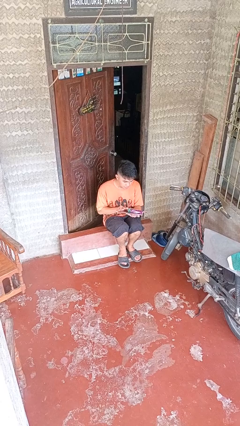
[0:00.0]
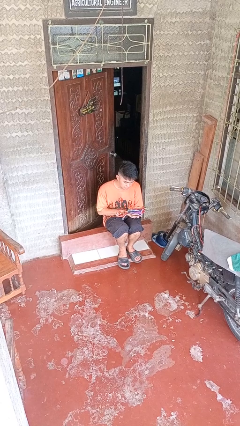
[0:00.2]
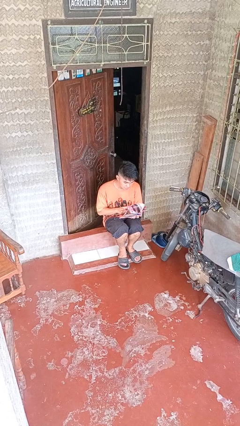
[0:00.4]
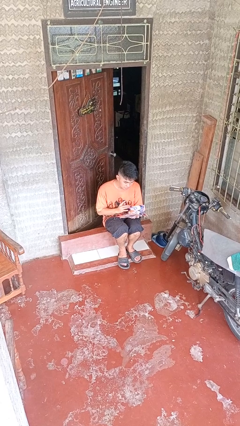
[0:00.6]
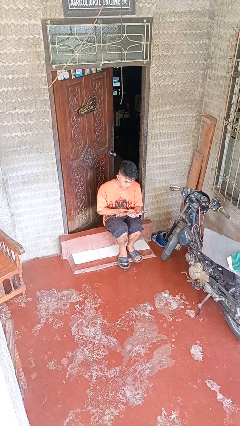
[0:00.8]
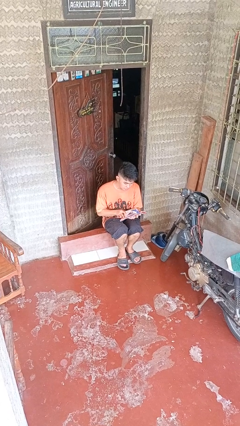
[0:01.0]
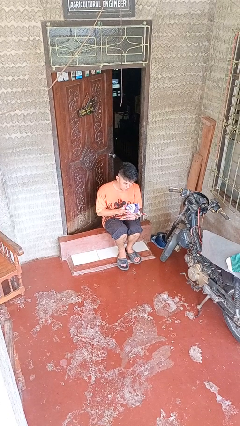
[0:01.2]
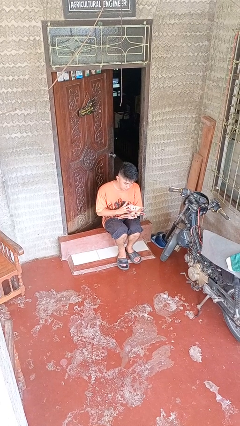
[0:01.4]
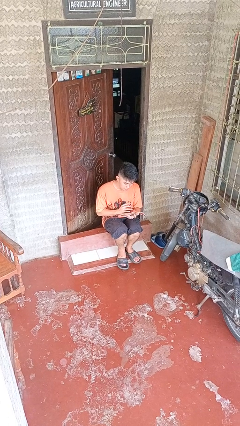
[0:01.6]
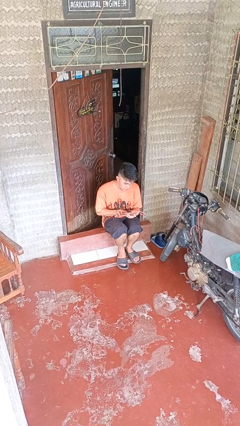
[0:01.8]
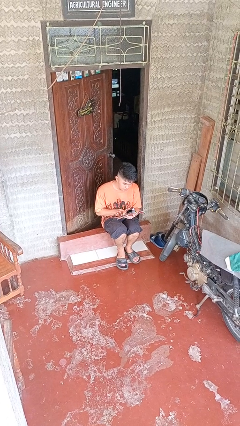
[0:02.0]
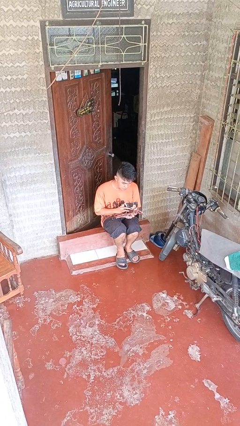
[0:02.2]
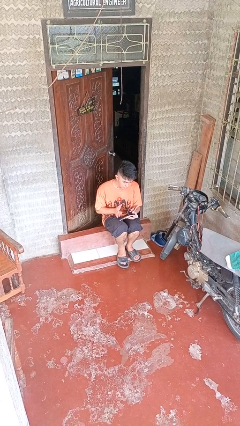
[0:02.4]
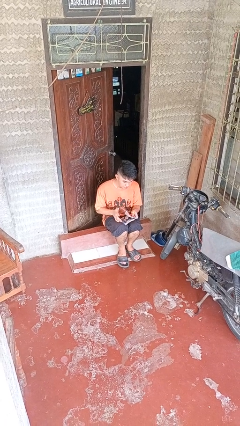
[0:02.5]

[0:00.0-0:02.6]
person reads magazine

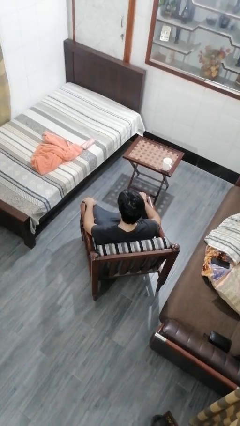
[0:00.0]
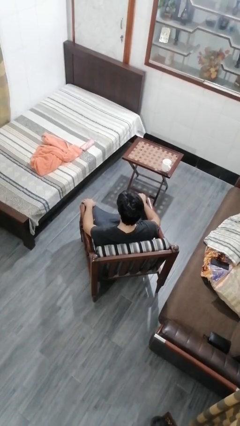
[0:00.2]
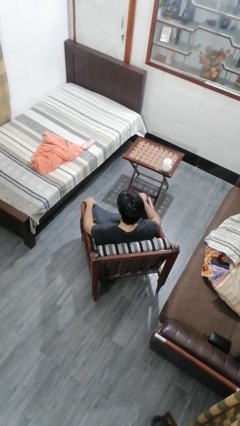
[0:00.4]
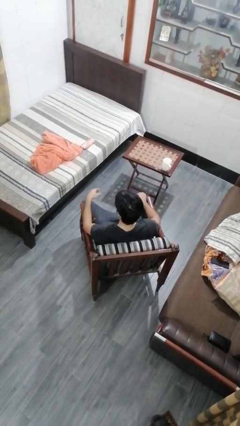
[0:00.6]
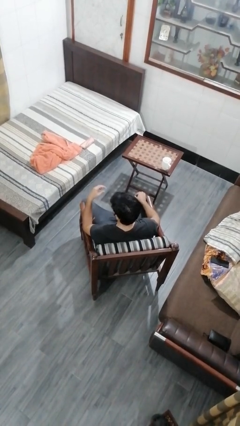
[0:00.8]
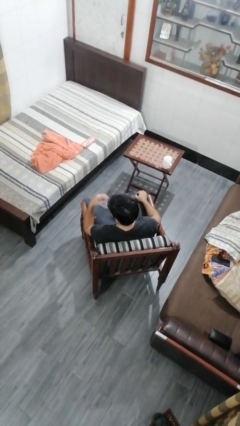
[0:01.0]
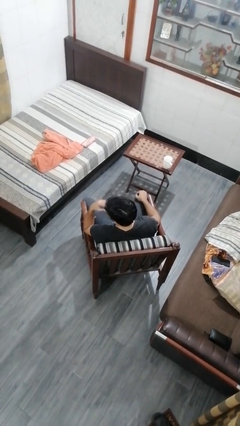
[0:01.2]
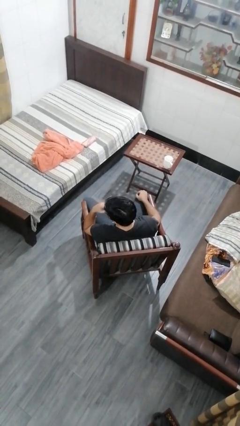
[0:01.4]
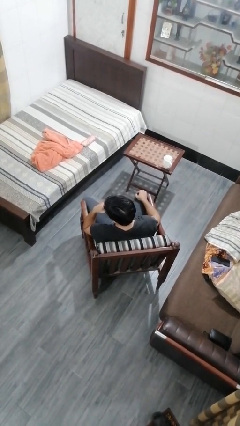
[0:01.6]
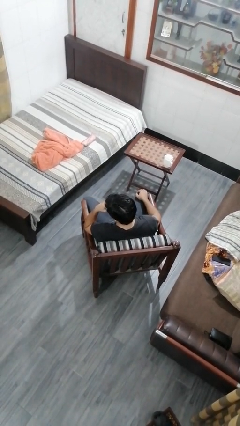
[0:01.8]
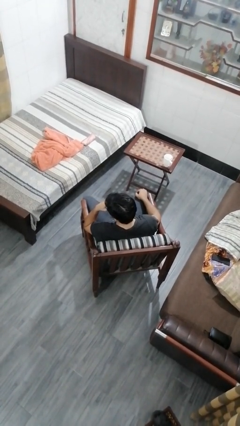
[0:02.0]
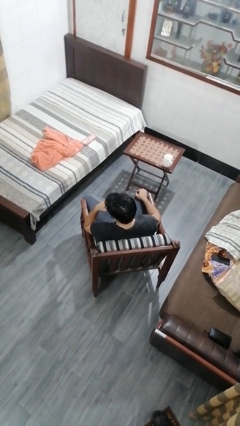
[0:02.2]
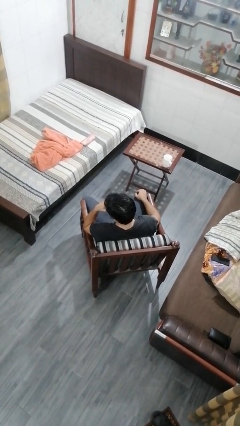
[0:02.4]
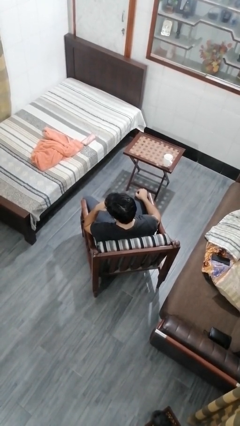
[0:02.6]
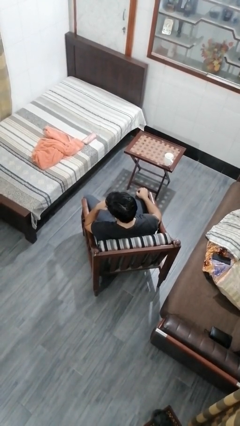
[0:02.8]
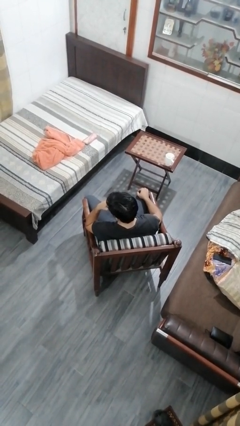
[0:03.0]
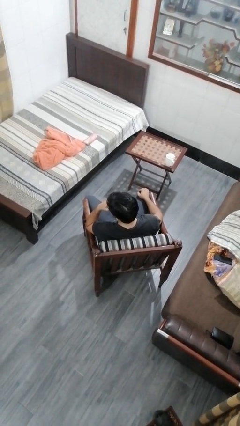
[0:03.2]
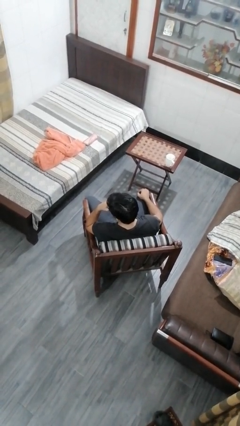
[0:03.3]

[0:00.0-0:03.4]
person strokes chin

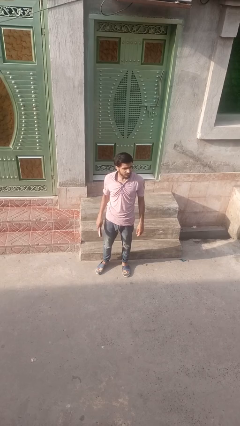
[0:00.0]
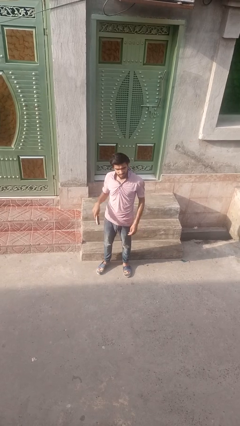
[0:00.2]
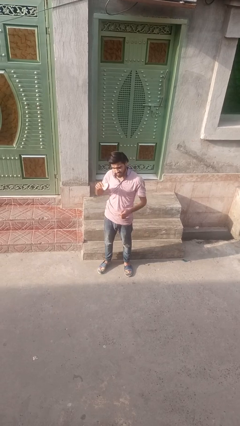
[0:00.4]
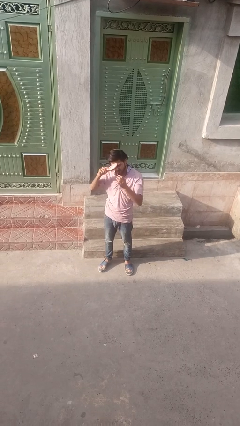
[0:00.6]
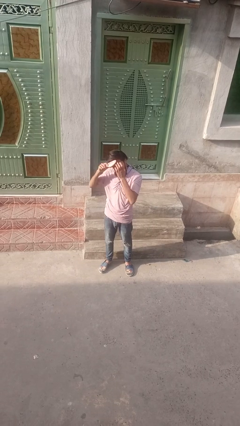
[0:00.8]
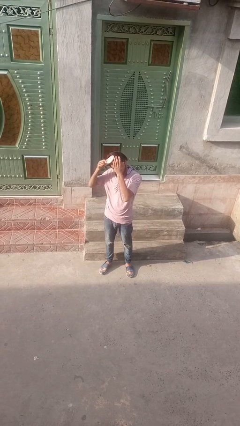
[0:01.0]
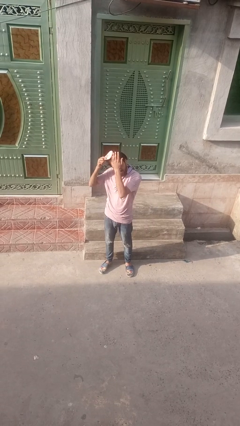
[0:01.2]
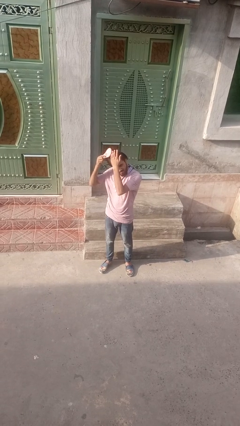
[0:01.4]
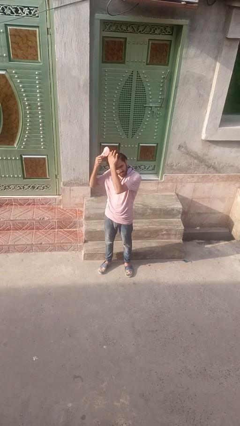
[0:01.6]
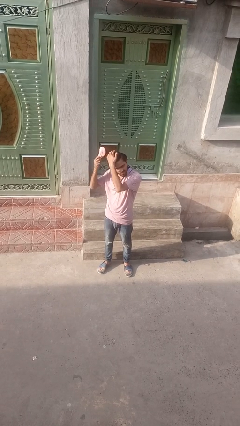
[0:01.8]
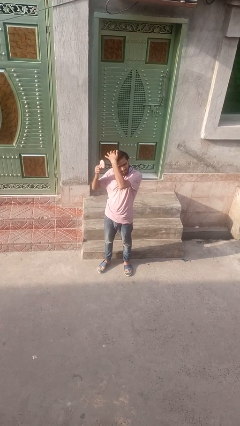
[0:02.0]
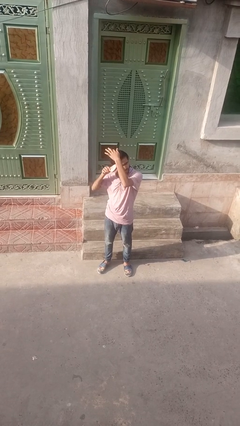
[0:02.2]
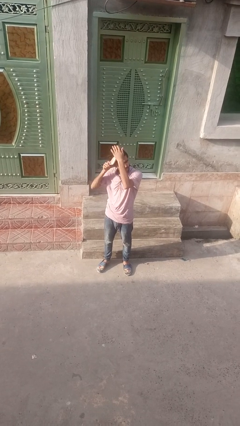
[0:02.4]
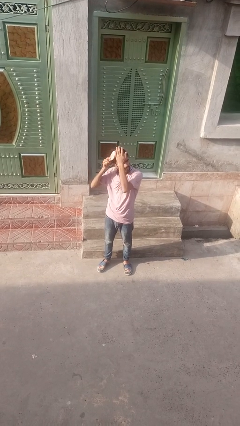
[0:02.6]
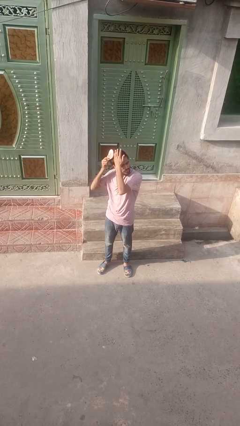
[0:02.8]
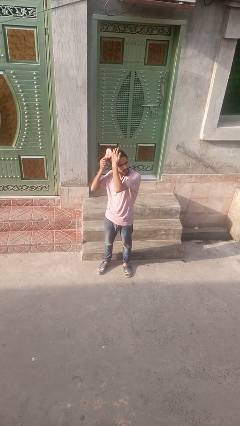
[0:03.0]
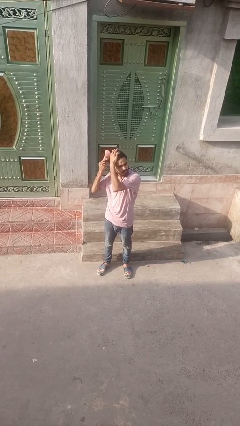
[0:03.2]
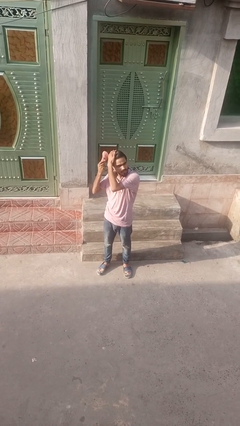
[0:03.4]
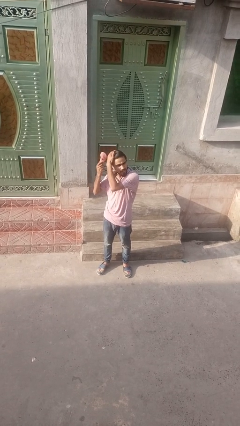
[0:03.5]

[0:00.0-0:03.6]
person brushes hair

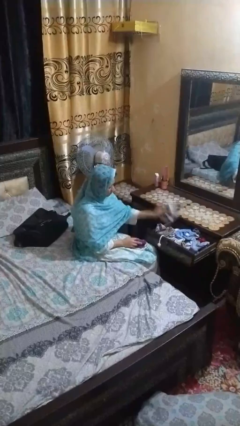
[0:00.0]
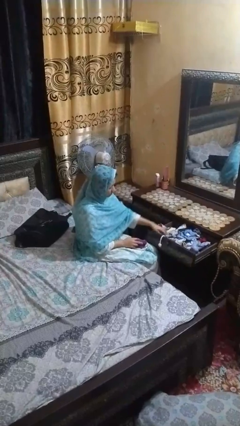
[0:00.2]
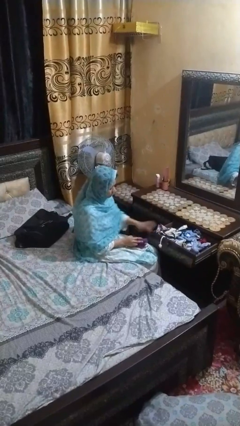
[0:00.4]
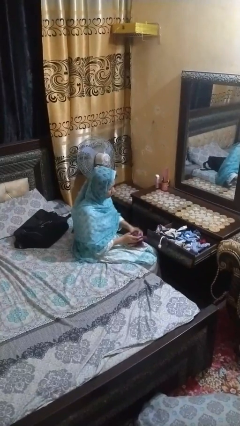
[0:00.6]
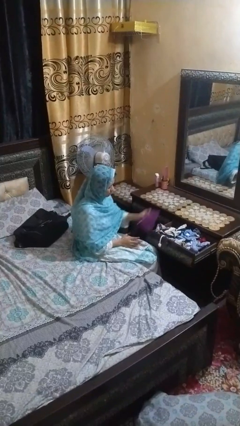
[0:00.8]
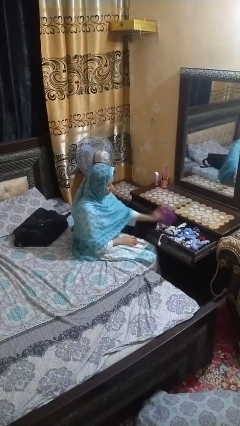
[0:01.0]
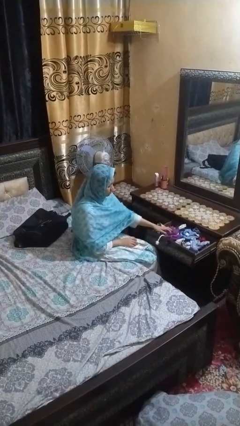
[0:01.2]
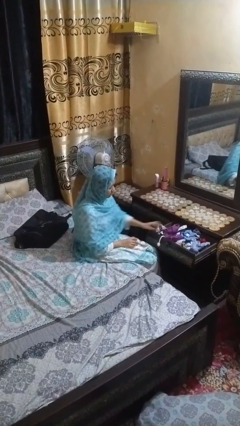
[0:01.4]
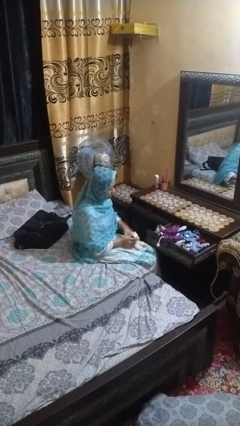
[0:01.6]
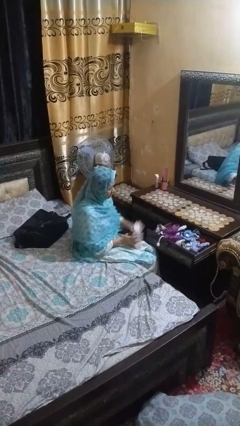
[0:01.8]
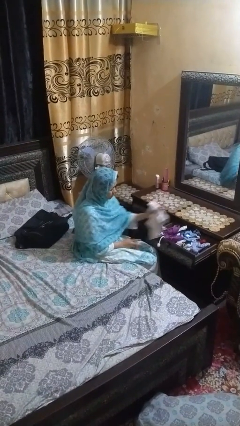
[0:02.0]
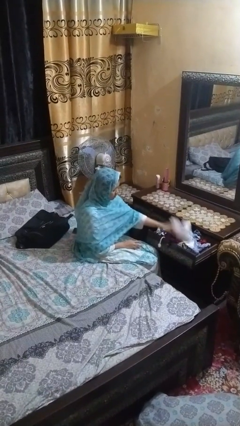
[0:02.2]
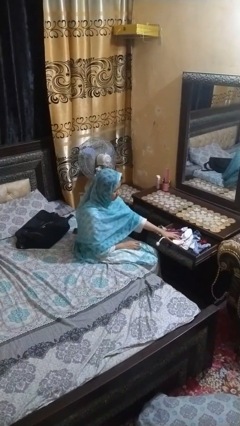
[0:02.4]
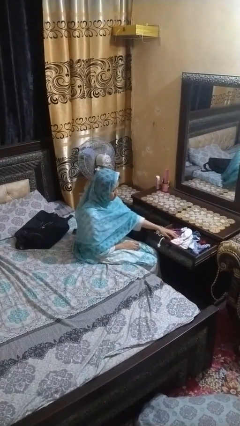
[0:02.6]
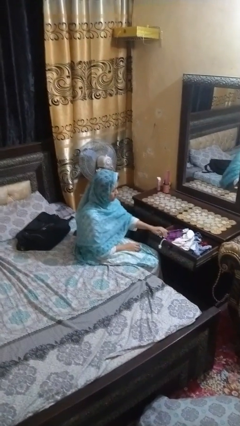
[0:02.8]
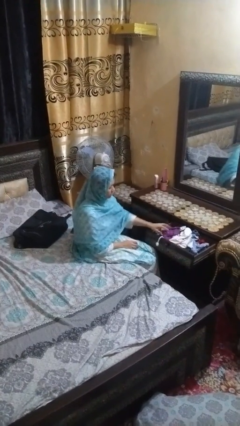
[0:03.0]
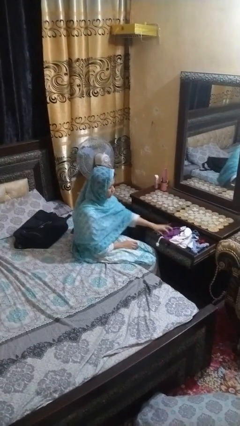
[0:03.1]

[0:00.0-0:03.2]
person puts clothes into dresser

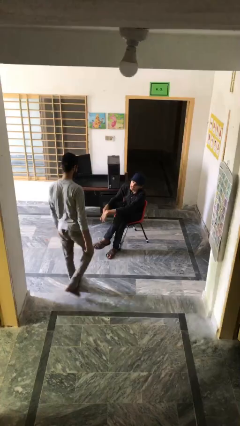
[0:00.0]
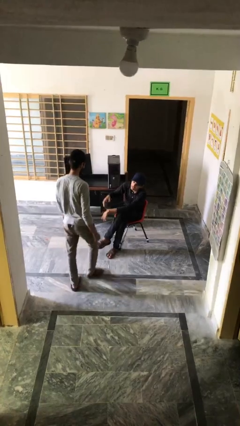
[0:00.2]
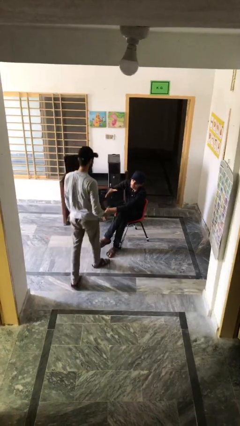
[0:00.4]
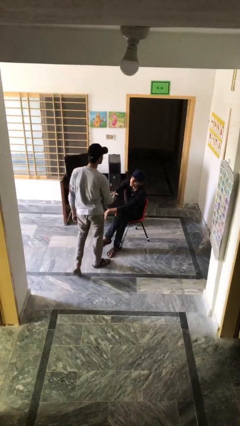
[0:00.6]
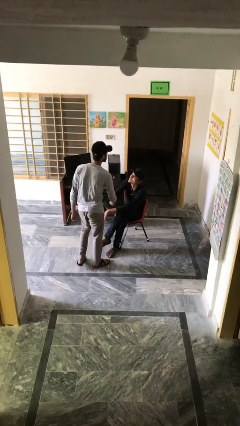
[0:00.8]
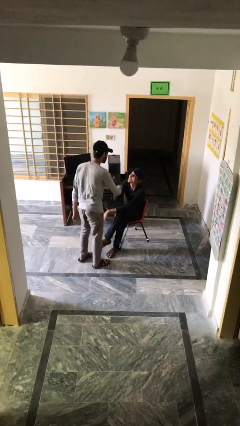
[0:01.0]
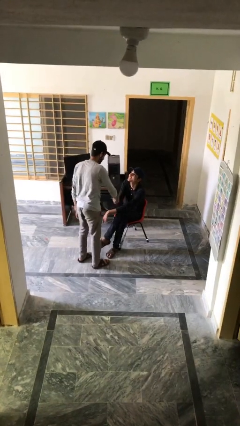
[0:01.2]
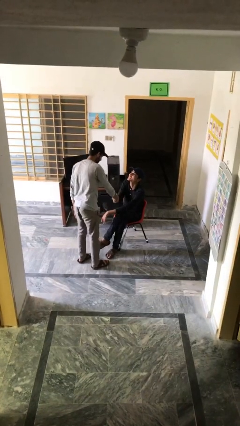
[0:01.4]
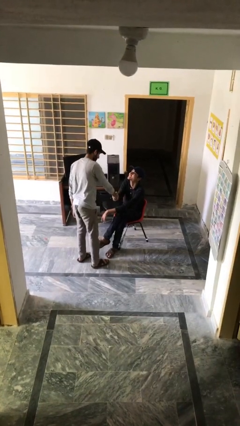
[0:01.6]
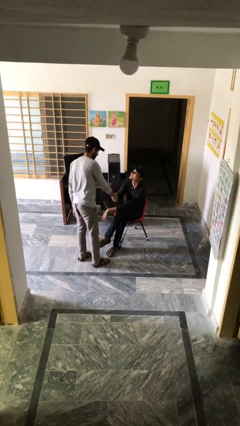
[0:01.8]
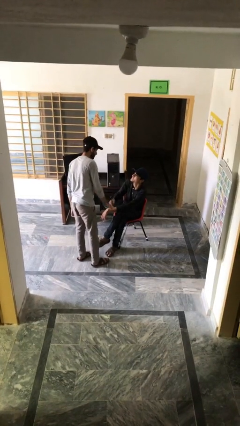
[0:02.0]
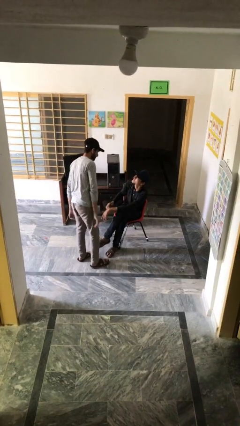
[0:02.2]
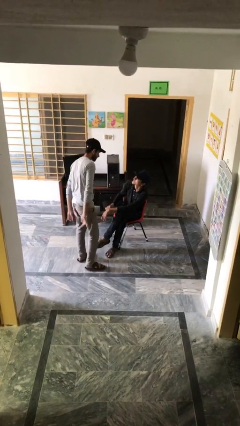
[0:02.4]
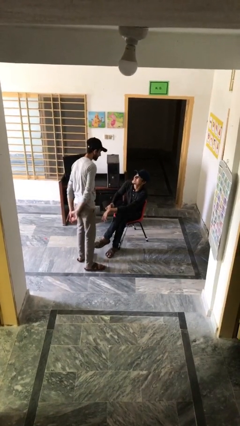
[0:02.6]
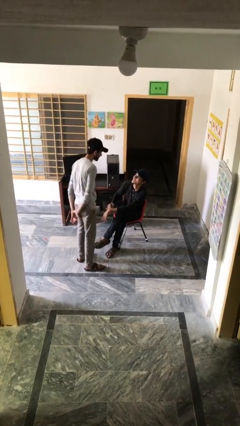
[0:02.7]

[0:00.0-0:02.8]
person shakes hand

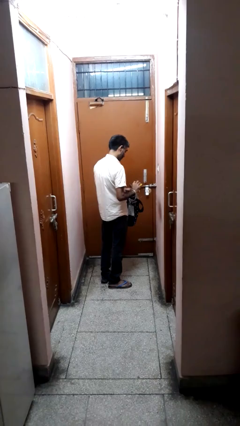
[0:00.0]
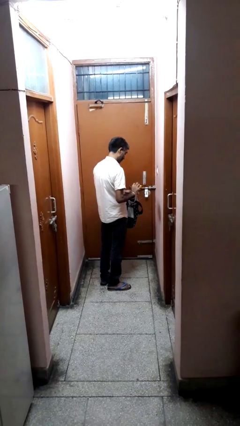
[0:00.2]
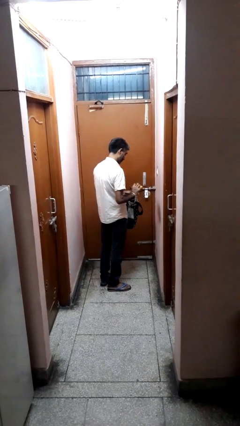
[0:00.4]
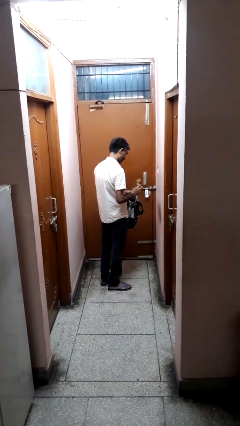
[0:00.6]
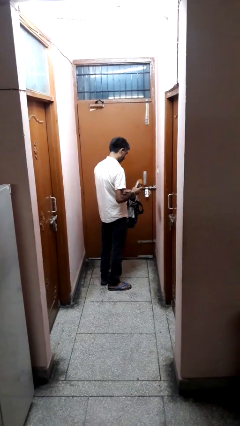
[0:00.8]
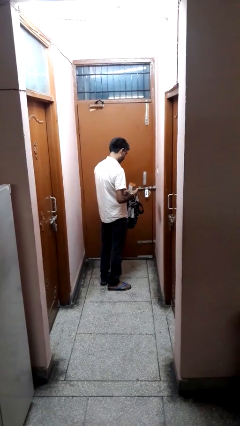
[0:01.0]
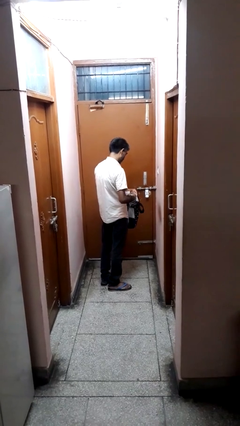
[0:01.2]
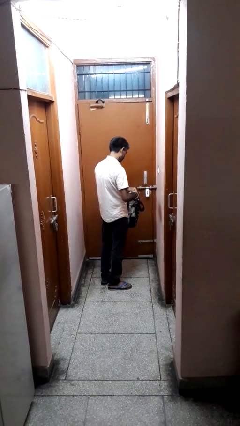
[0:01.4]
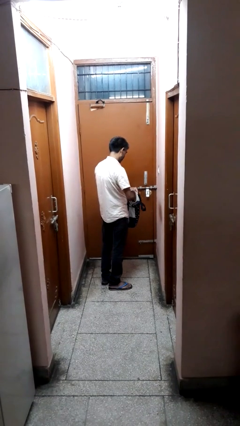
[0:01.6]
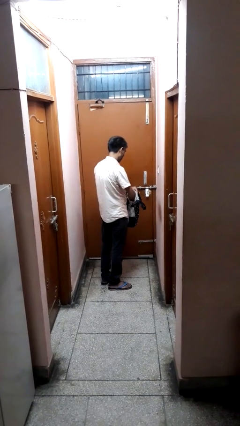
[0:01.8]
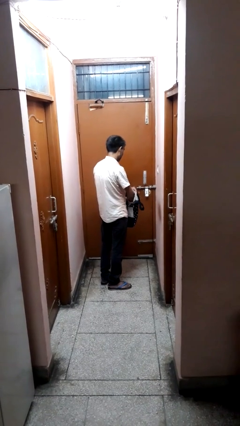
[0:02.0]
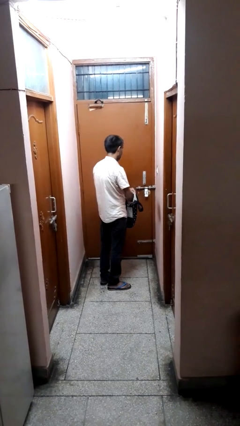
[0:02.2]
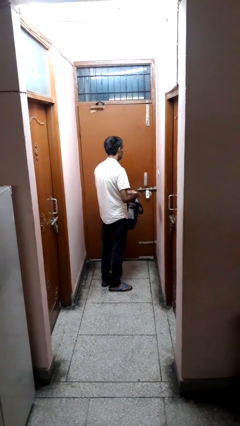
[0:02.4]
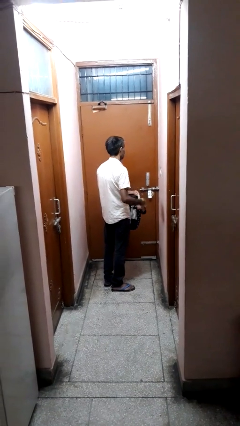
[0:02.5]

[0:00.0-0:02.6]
person puts object into bag
